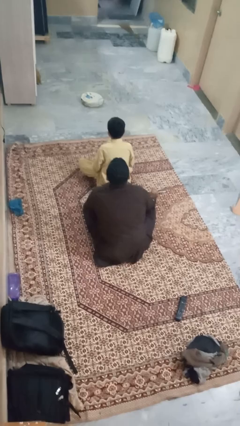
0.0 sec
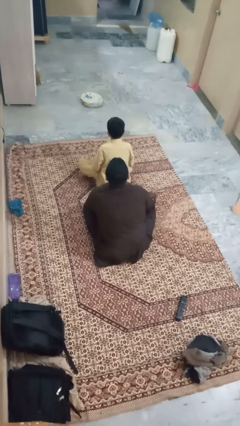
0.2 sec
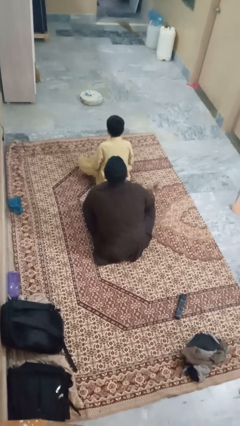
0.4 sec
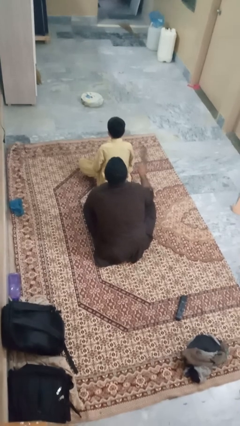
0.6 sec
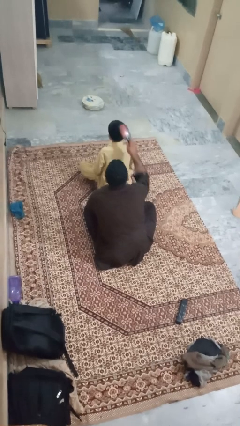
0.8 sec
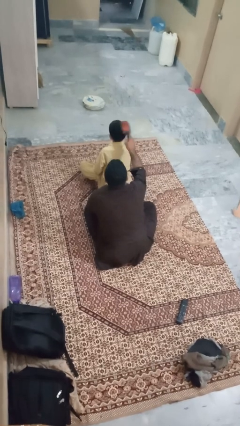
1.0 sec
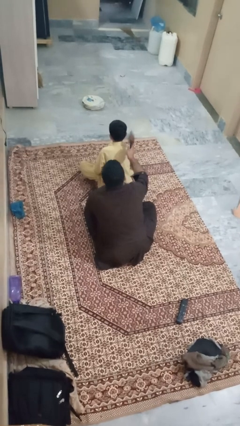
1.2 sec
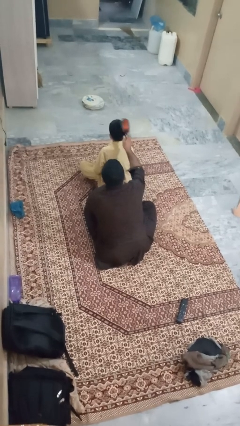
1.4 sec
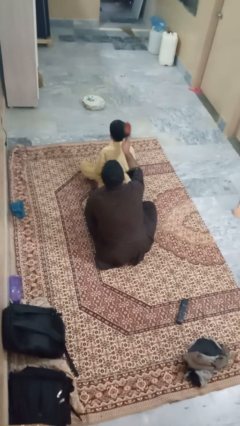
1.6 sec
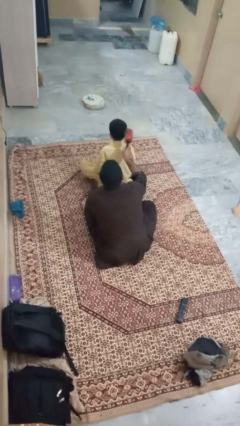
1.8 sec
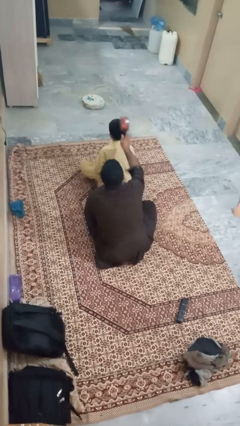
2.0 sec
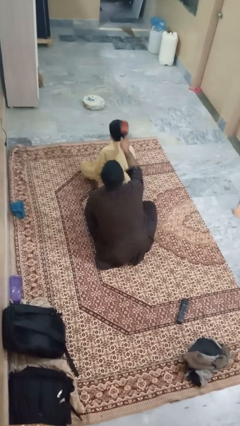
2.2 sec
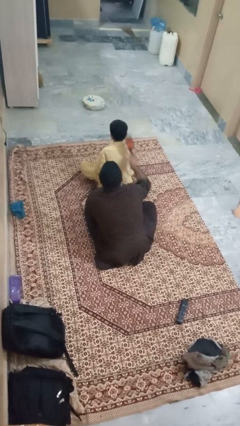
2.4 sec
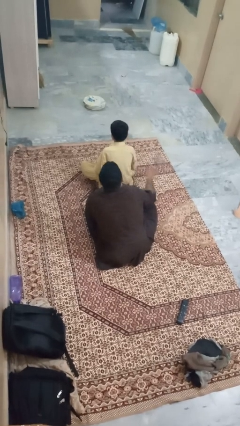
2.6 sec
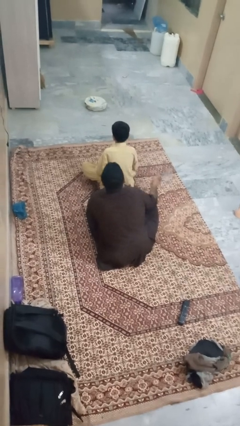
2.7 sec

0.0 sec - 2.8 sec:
person brushes hair of person

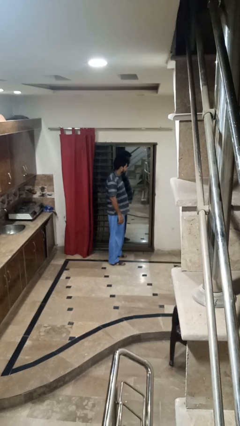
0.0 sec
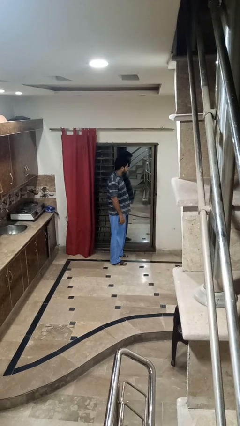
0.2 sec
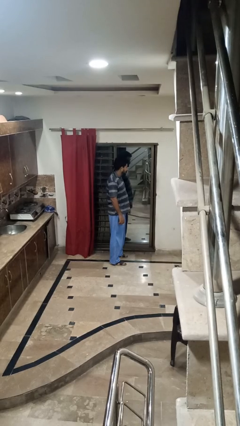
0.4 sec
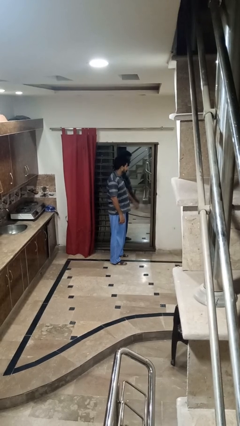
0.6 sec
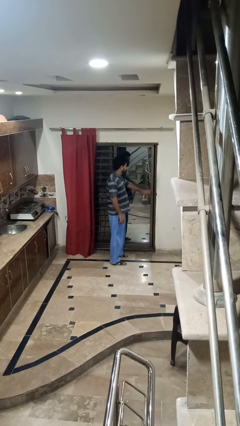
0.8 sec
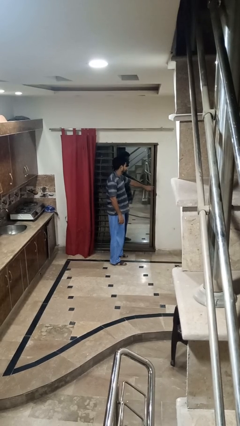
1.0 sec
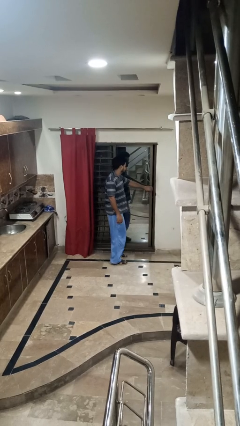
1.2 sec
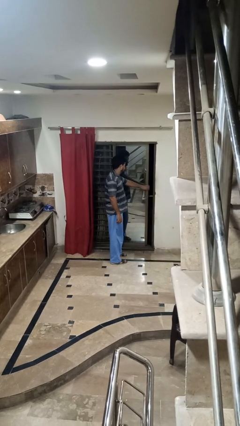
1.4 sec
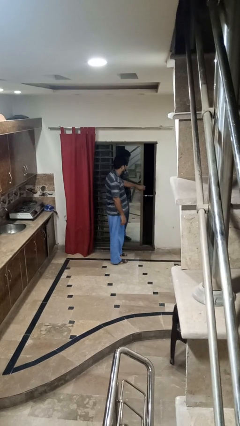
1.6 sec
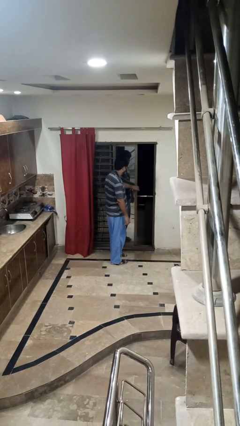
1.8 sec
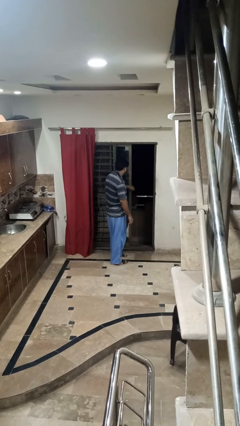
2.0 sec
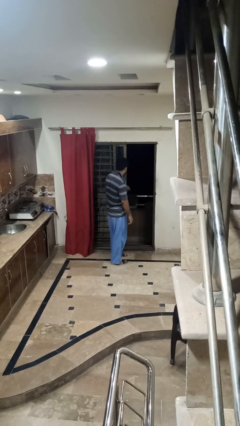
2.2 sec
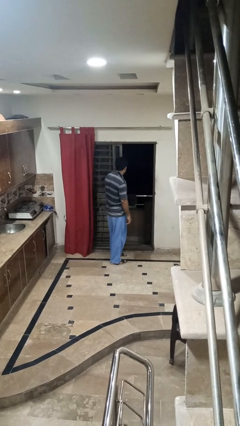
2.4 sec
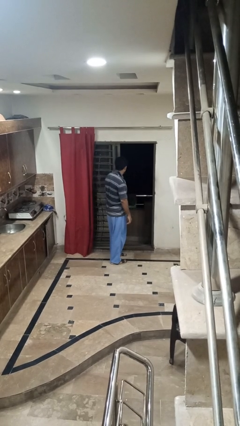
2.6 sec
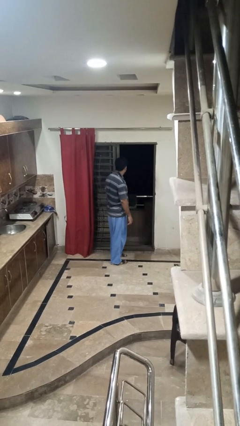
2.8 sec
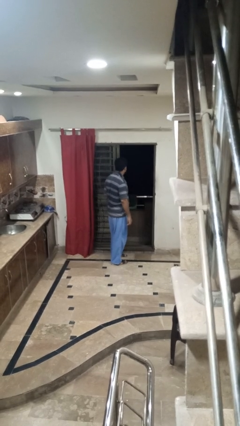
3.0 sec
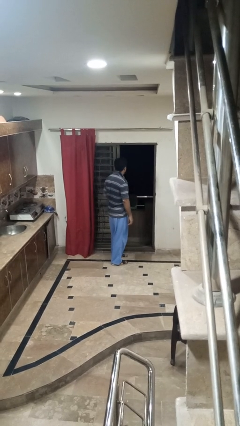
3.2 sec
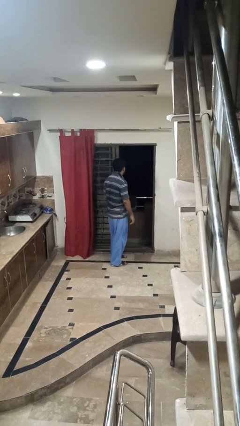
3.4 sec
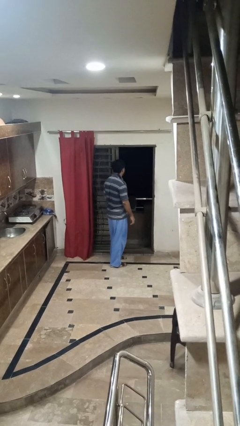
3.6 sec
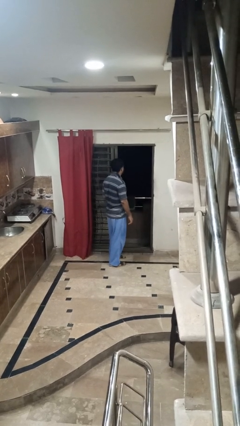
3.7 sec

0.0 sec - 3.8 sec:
person opens sliding door

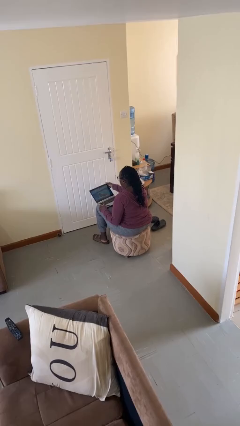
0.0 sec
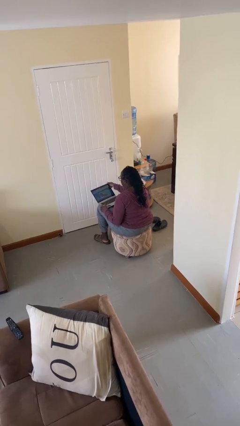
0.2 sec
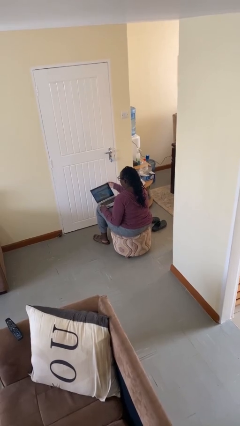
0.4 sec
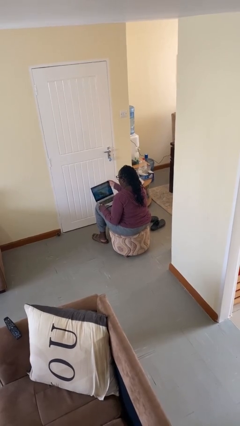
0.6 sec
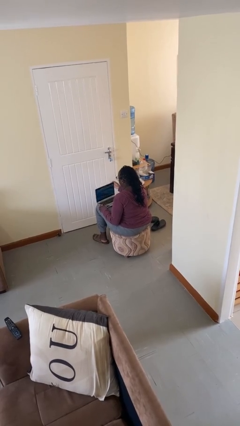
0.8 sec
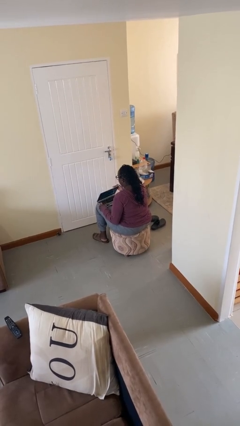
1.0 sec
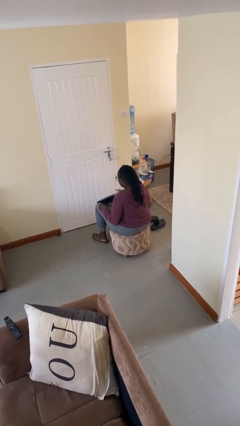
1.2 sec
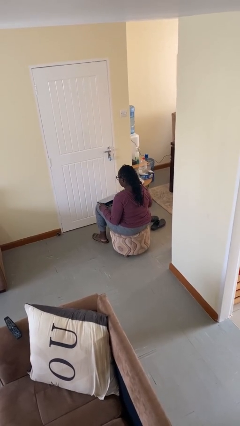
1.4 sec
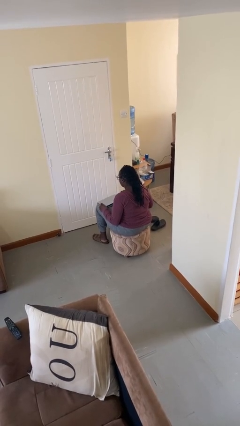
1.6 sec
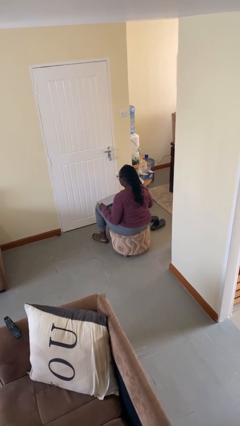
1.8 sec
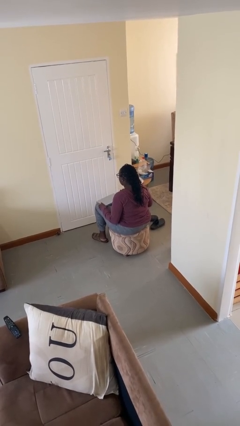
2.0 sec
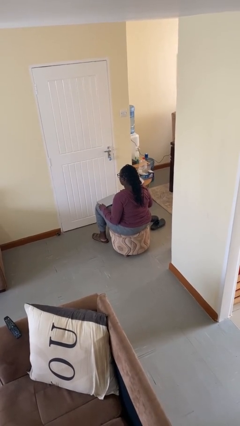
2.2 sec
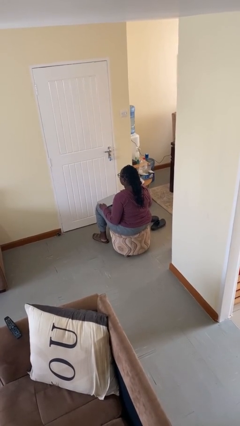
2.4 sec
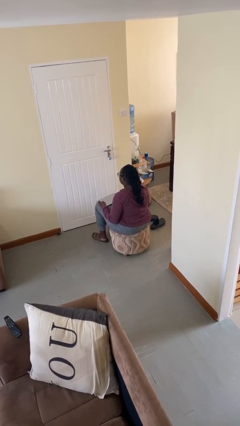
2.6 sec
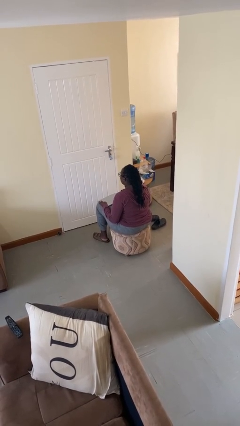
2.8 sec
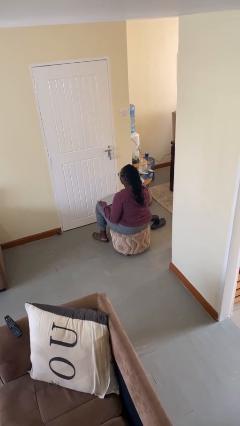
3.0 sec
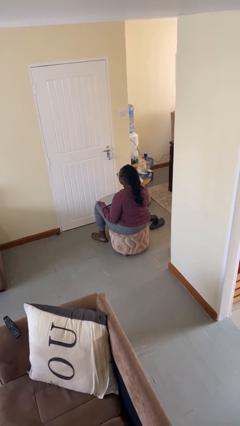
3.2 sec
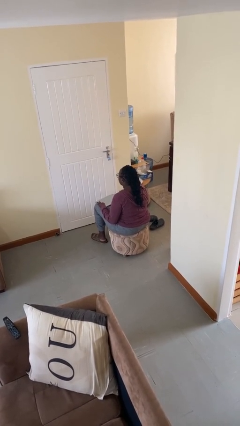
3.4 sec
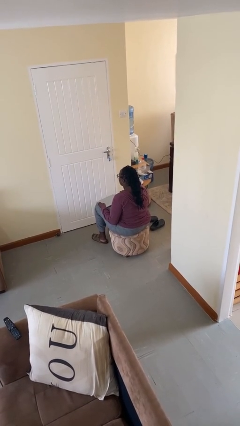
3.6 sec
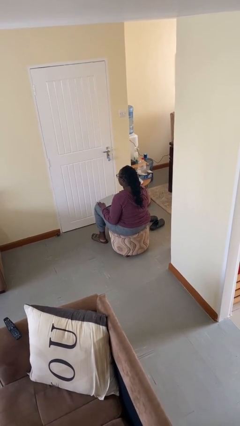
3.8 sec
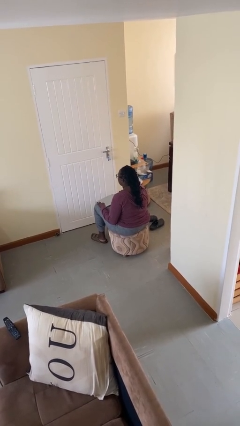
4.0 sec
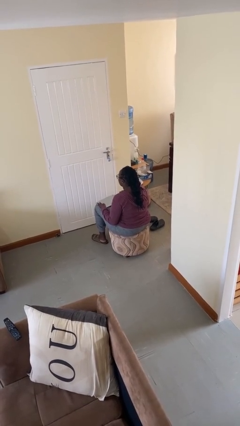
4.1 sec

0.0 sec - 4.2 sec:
person closes laptop

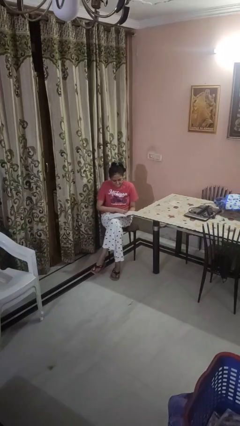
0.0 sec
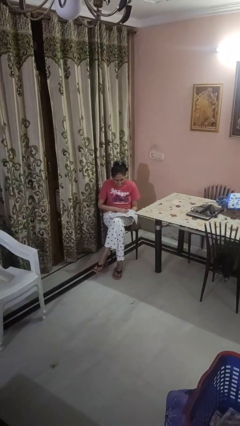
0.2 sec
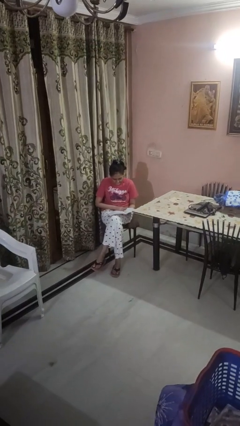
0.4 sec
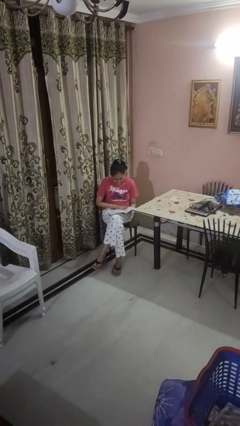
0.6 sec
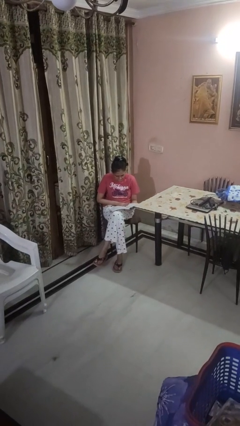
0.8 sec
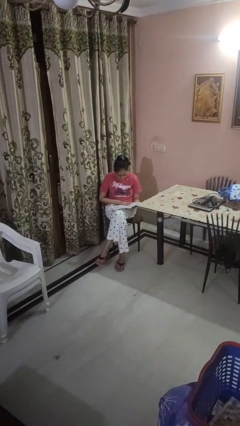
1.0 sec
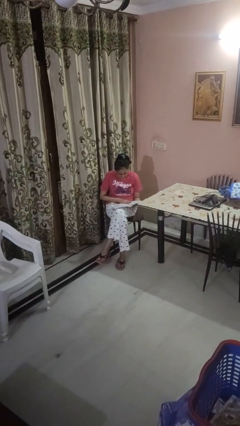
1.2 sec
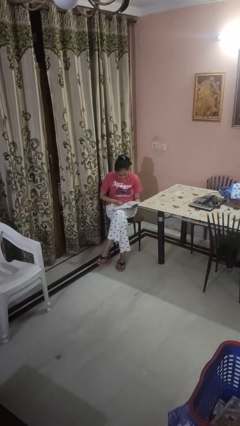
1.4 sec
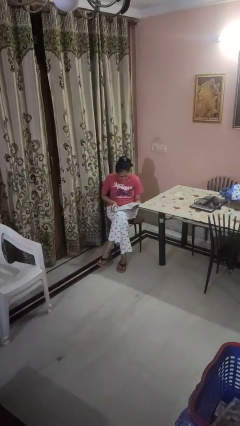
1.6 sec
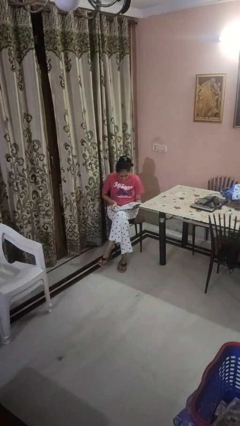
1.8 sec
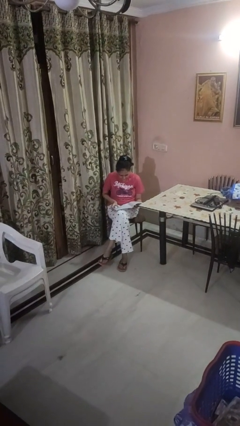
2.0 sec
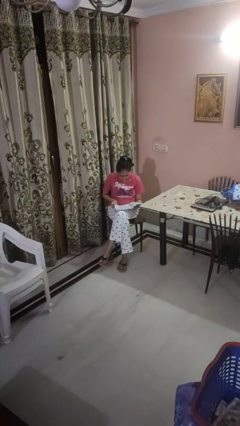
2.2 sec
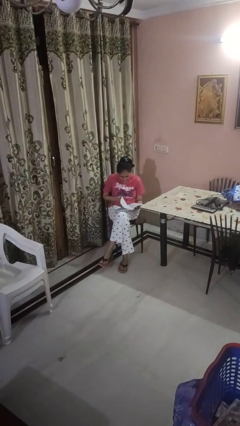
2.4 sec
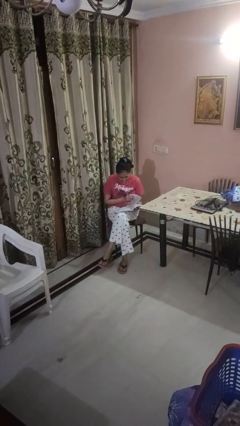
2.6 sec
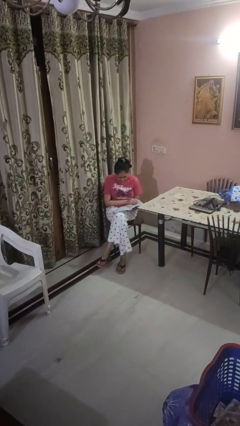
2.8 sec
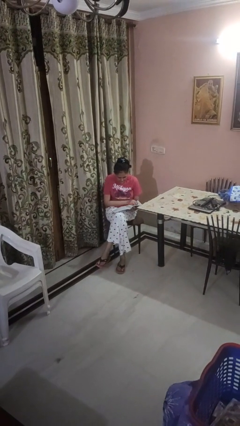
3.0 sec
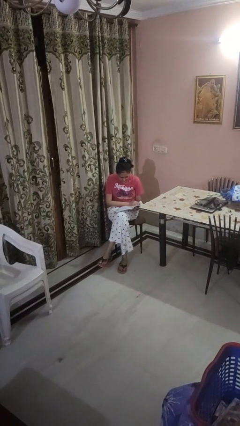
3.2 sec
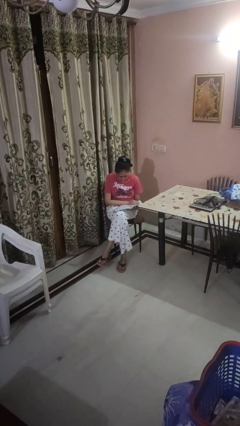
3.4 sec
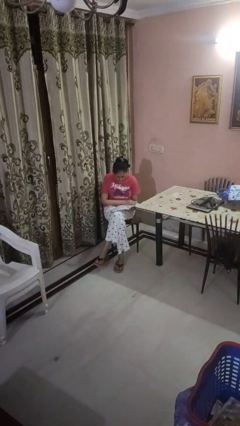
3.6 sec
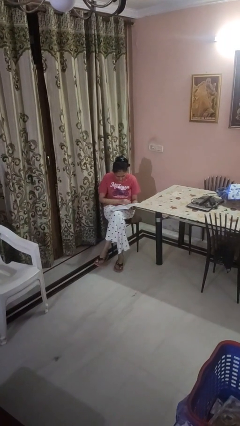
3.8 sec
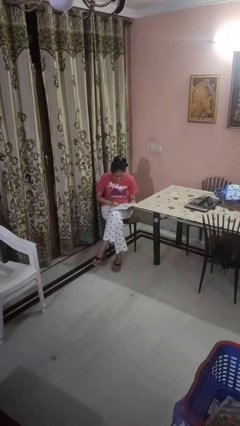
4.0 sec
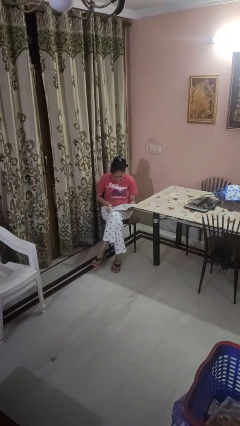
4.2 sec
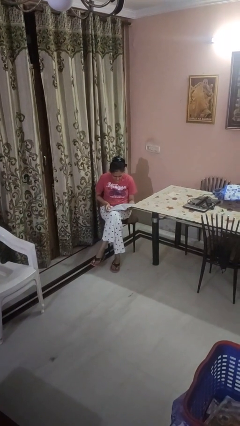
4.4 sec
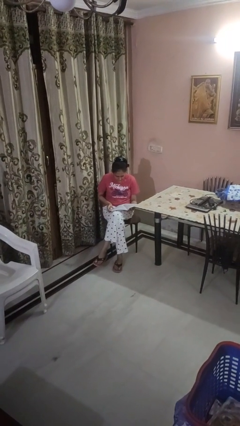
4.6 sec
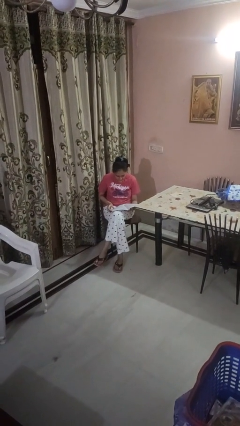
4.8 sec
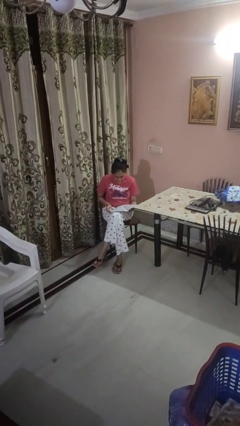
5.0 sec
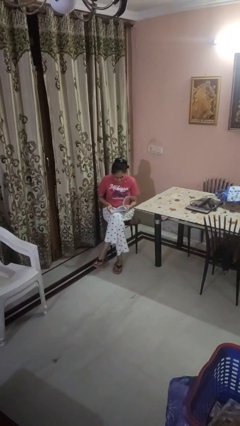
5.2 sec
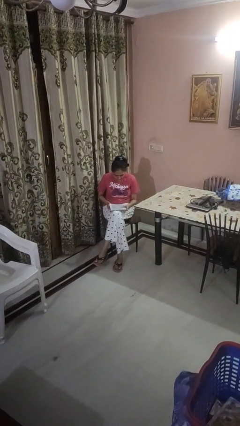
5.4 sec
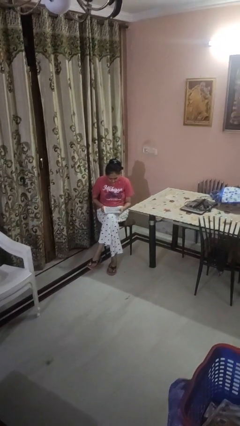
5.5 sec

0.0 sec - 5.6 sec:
person reads magazine

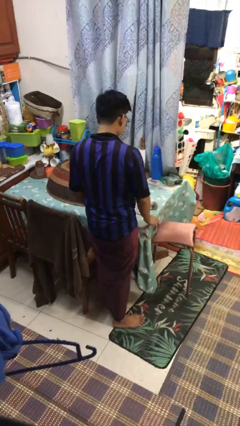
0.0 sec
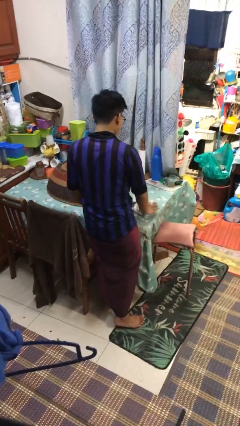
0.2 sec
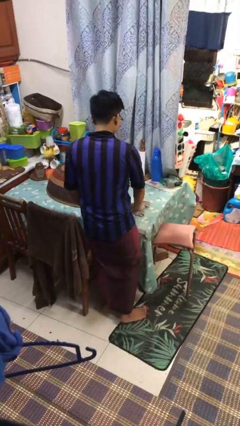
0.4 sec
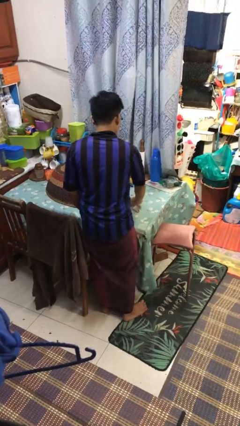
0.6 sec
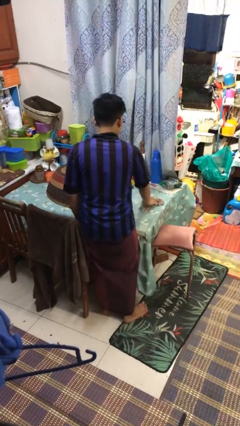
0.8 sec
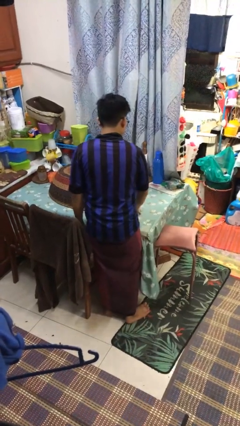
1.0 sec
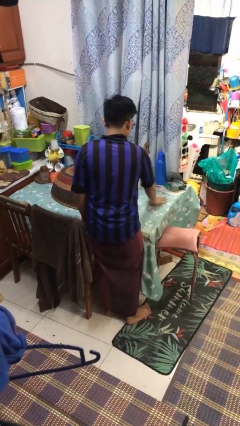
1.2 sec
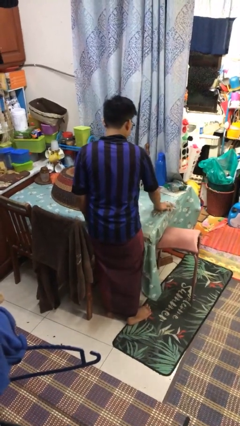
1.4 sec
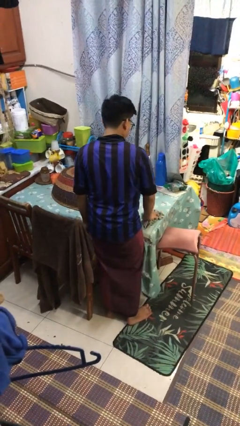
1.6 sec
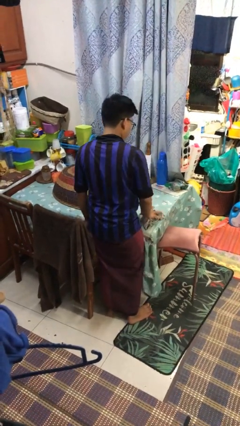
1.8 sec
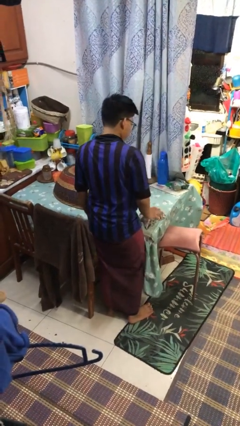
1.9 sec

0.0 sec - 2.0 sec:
person cleans table with rag
